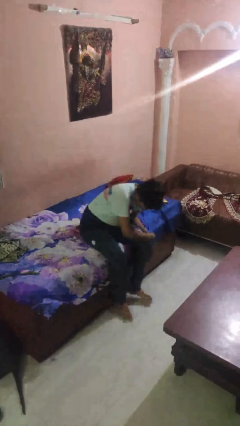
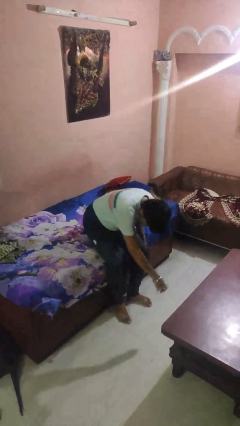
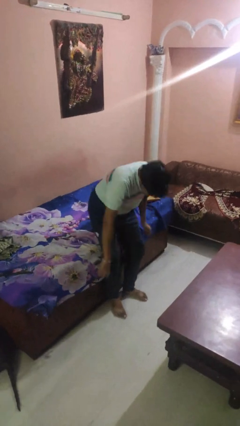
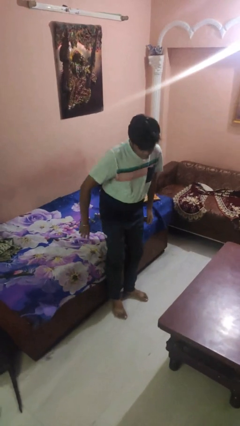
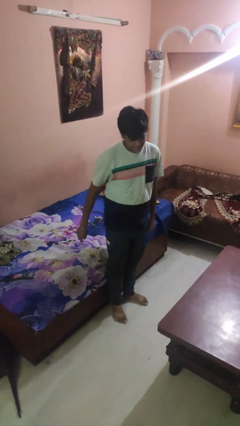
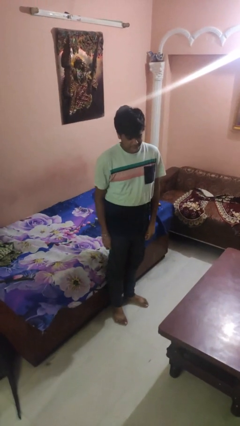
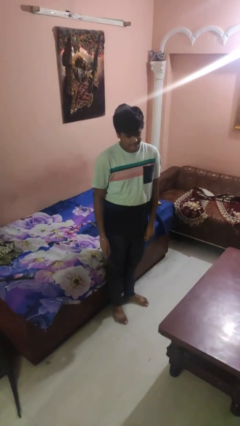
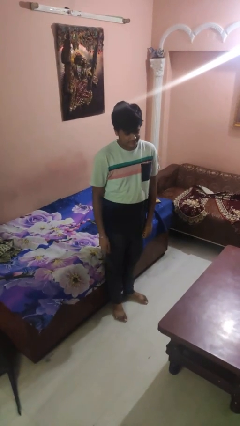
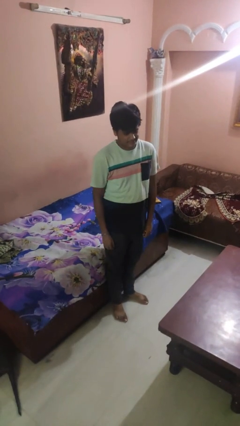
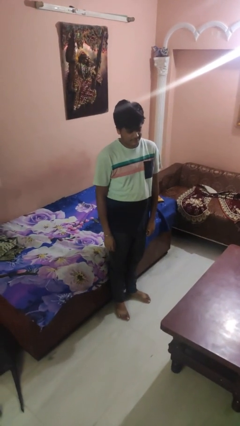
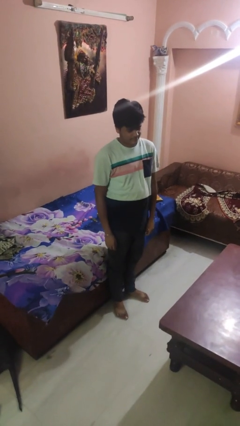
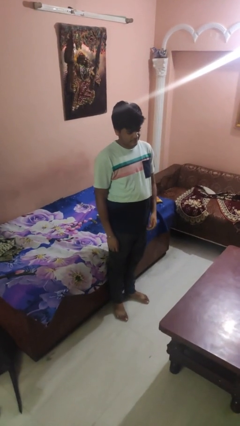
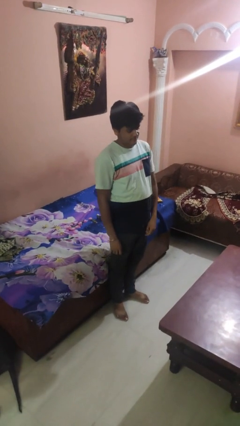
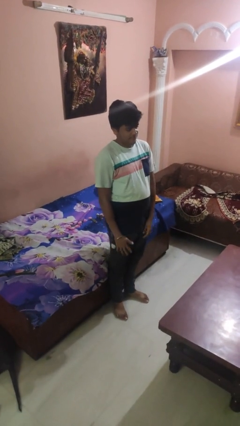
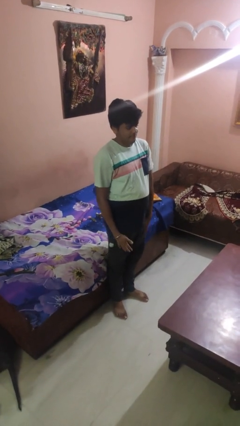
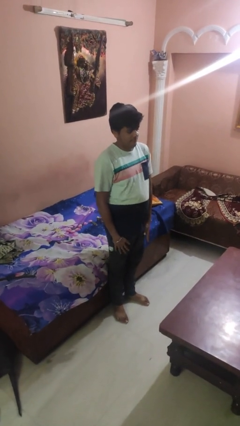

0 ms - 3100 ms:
person stands up

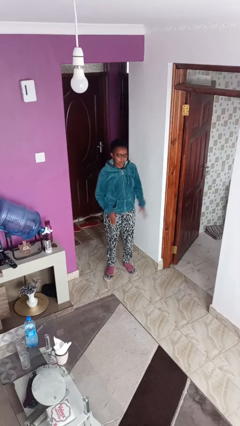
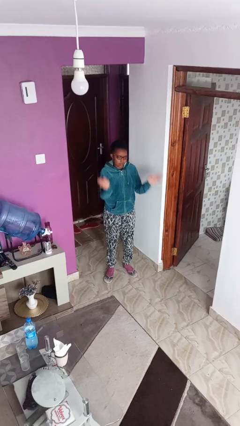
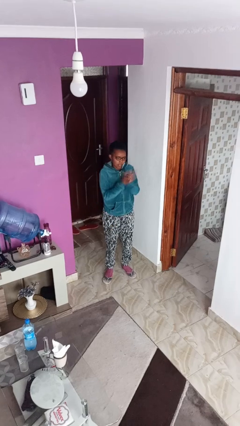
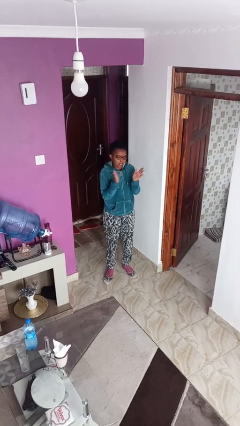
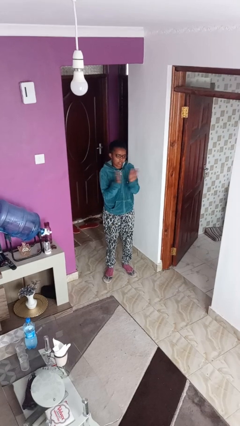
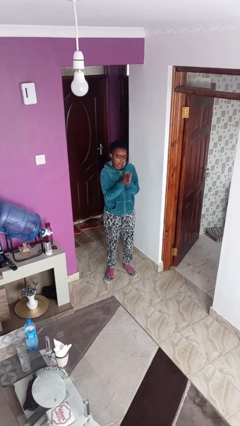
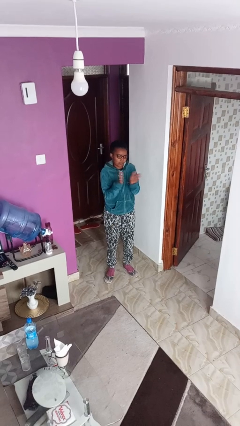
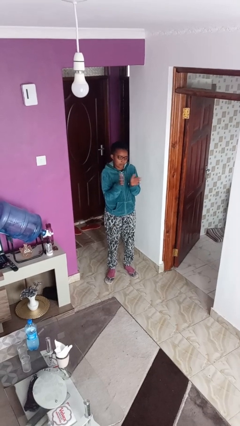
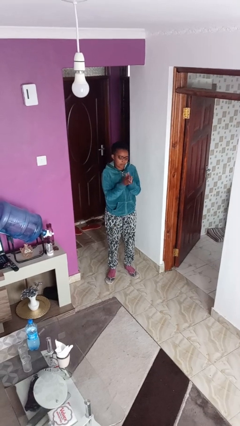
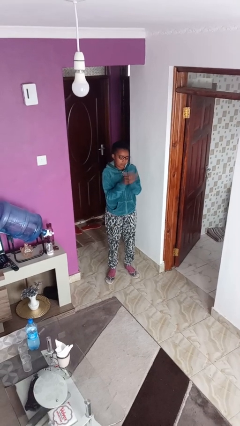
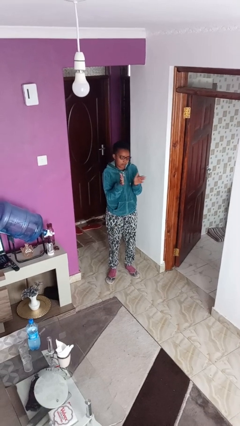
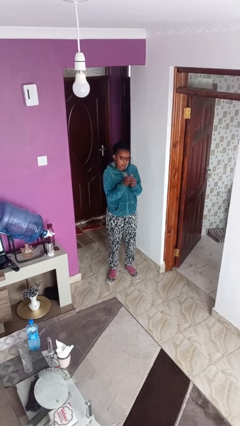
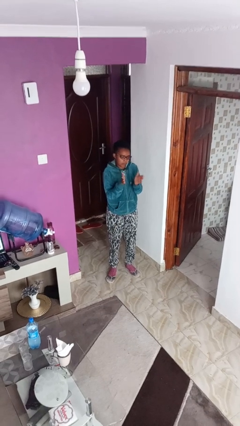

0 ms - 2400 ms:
person claps hands

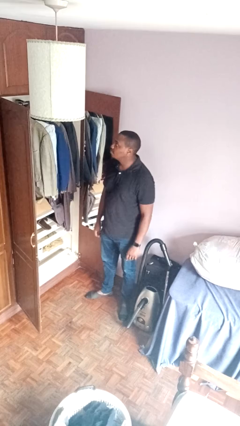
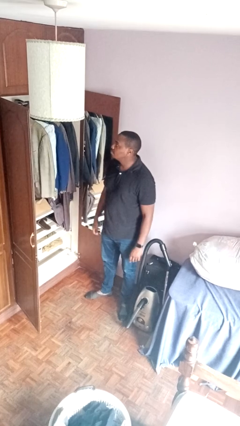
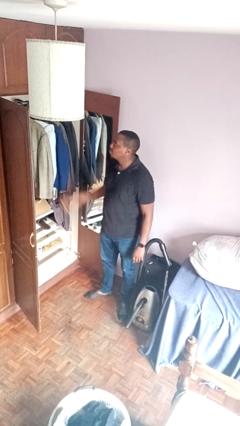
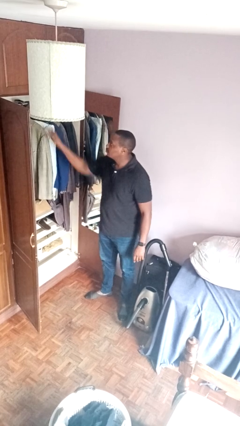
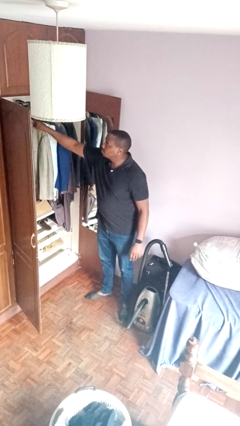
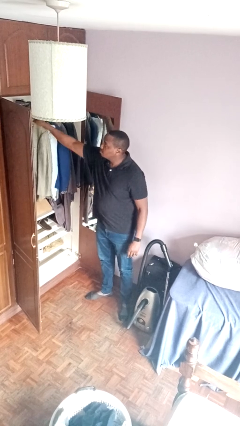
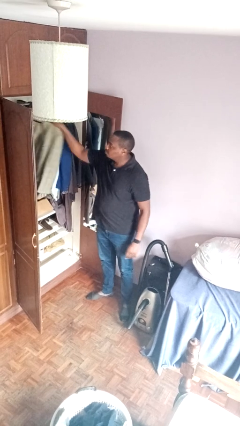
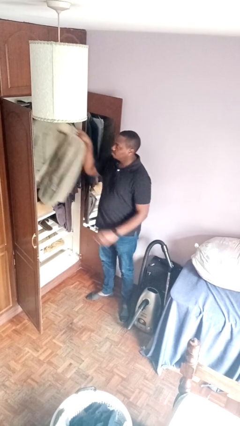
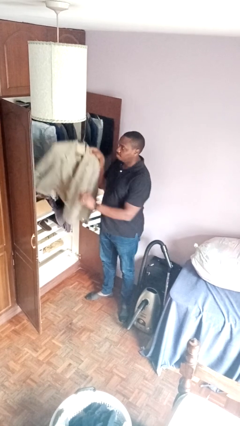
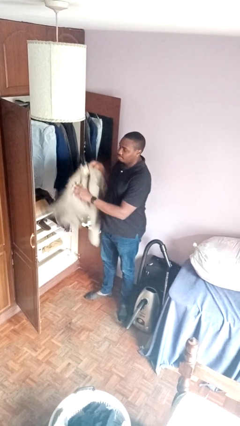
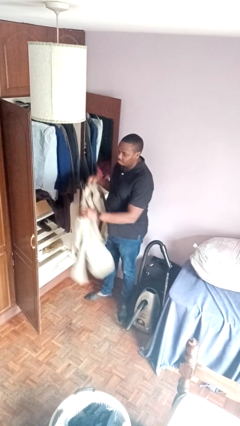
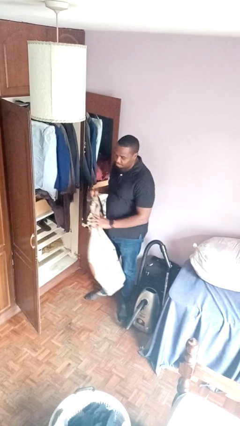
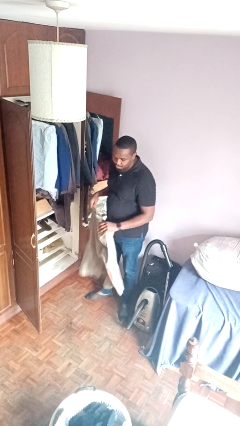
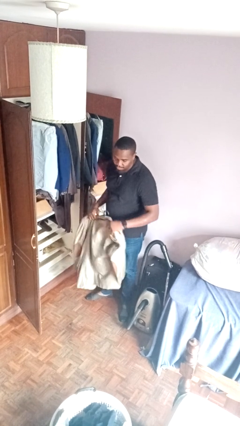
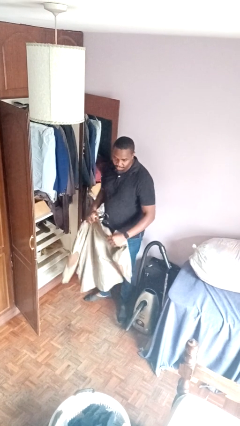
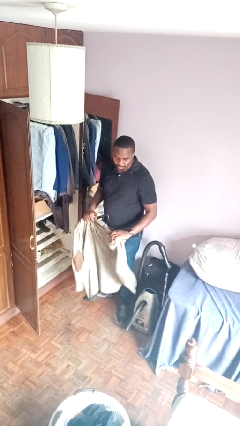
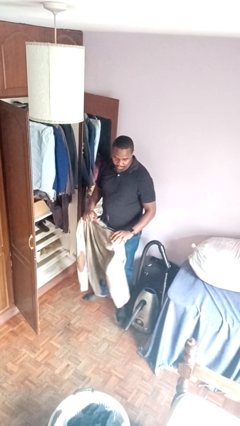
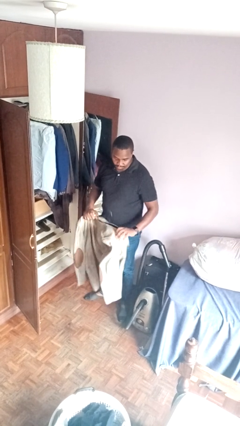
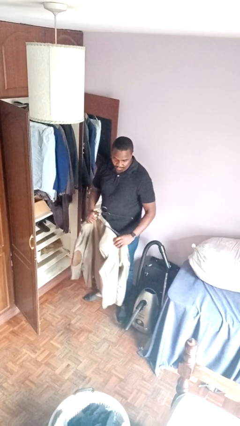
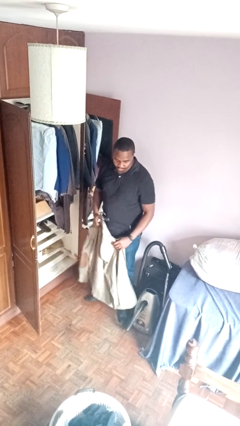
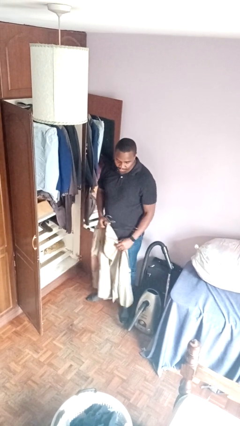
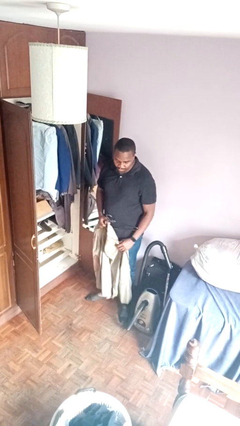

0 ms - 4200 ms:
person takes clothes from closet

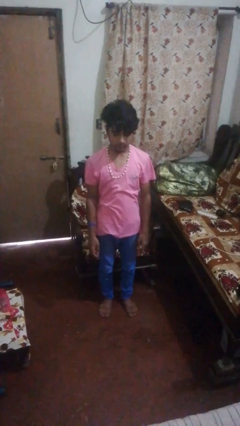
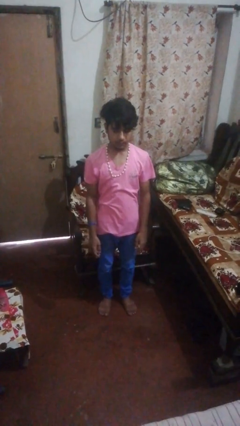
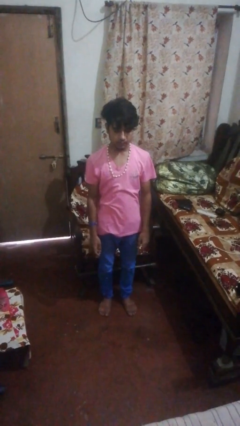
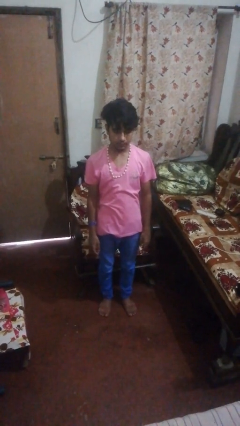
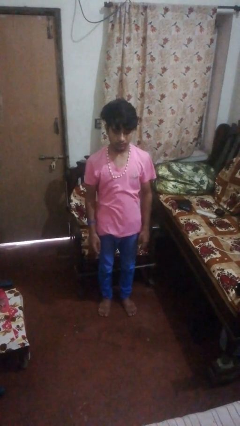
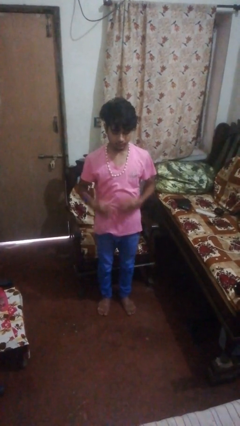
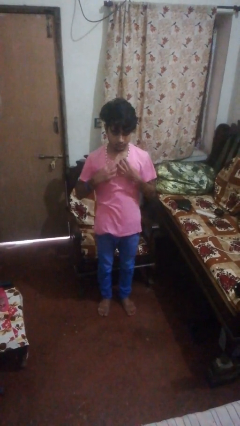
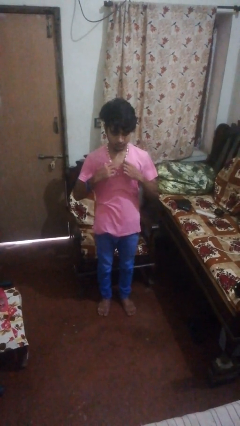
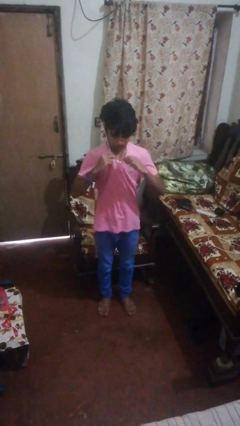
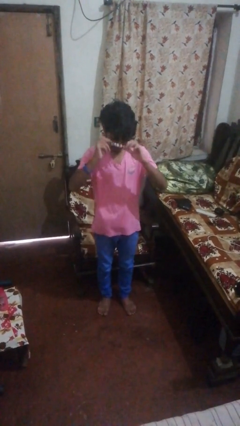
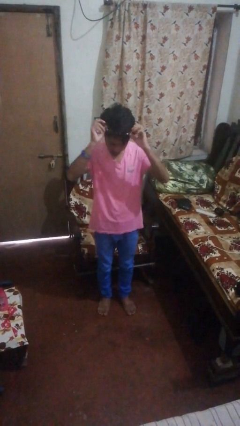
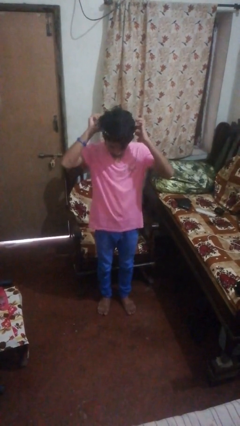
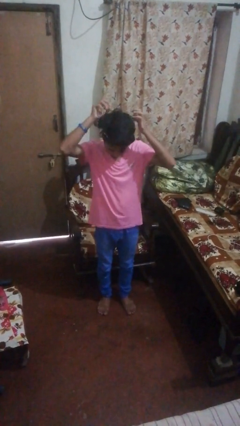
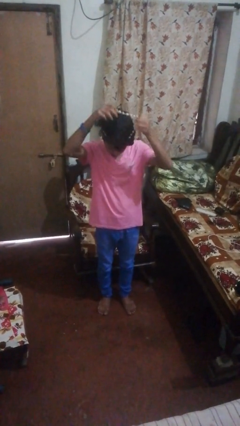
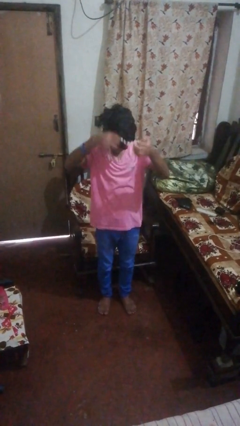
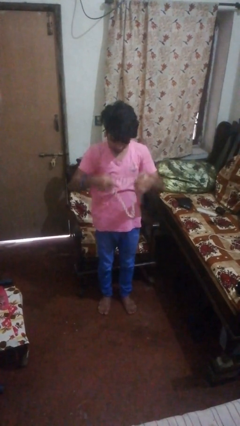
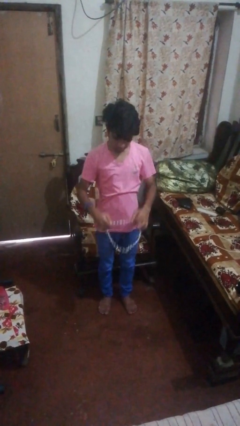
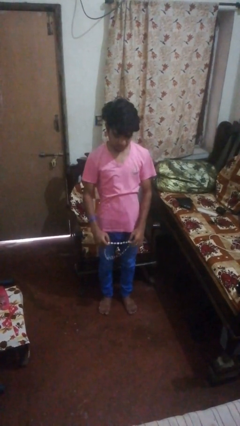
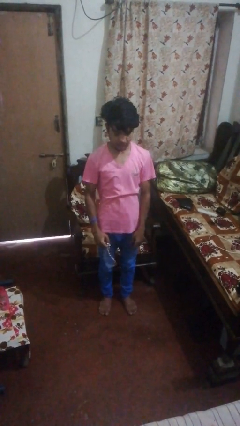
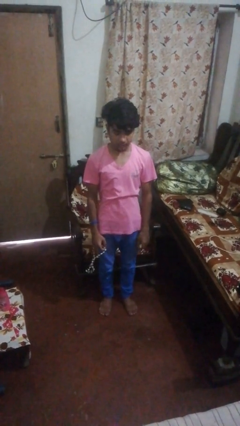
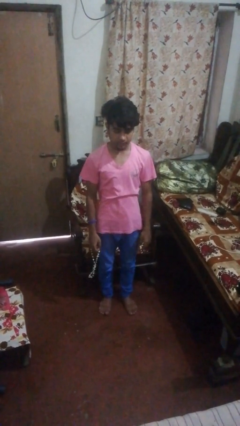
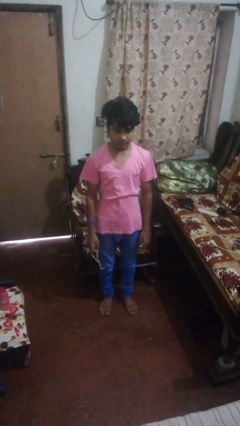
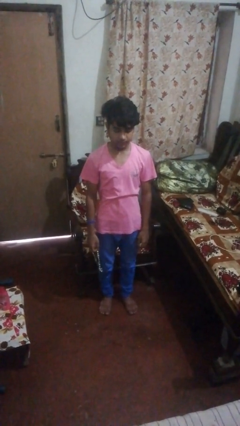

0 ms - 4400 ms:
person takes off necklace

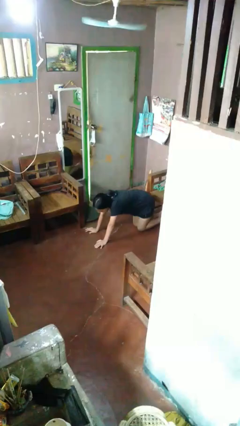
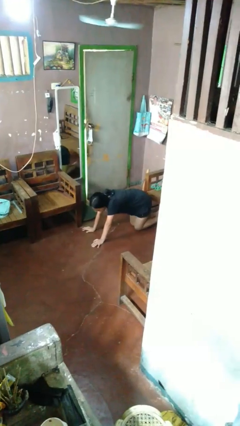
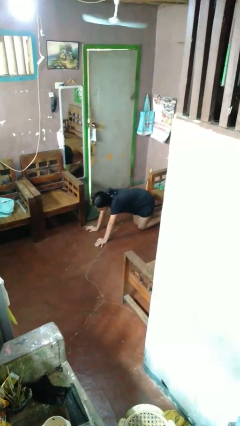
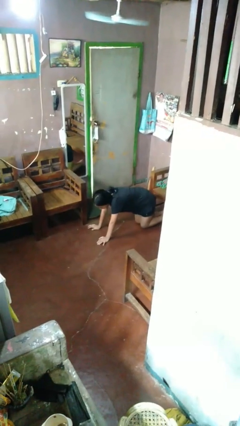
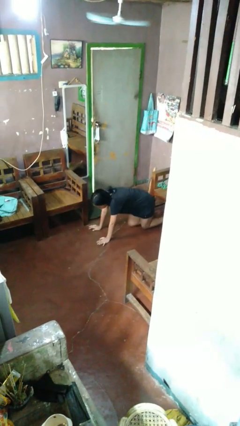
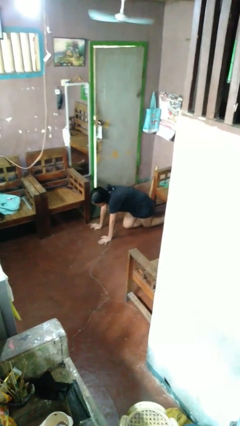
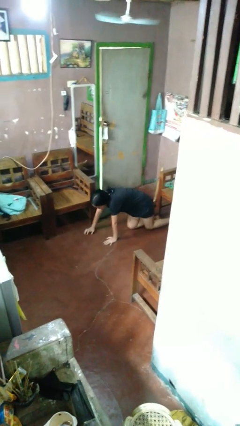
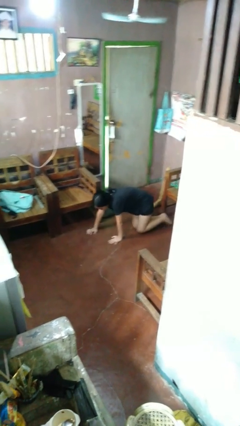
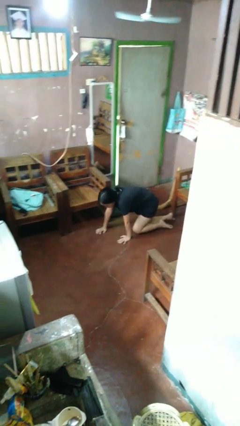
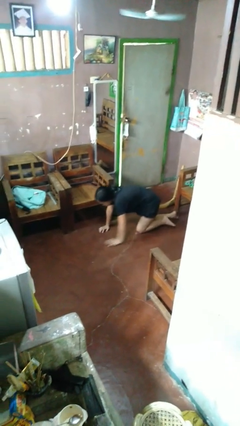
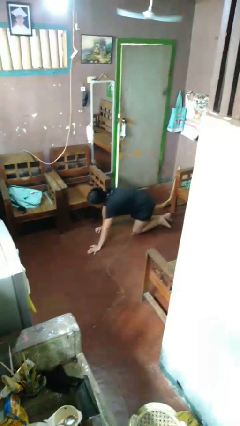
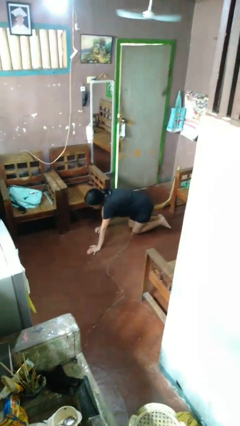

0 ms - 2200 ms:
person crawls

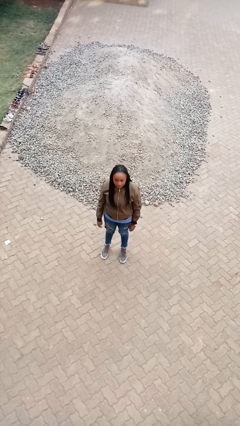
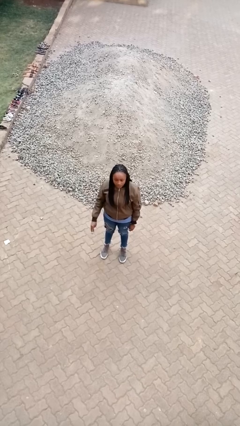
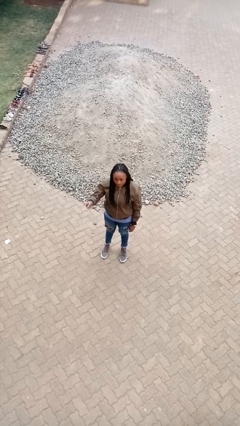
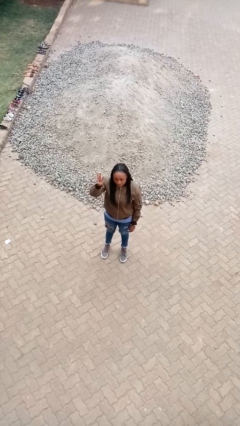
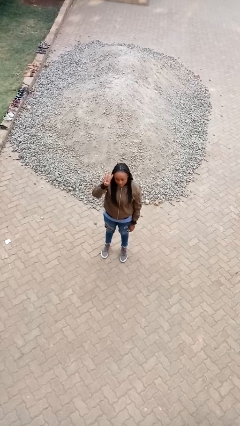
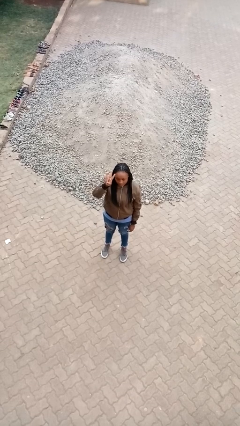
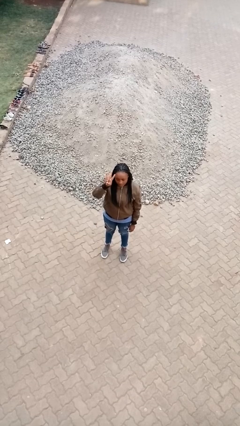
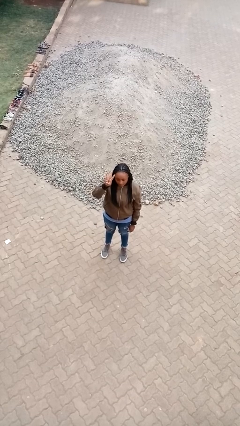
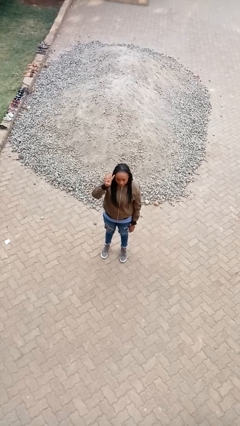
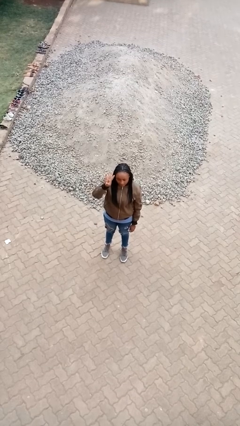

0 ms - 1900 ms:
person gestures number three
